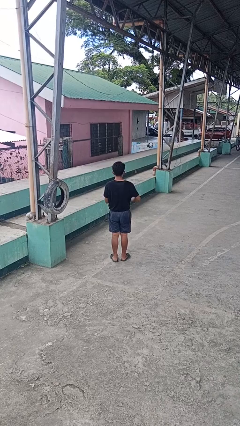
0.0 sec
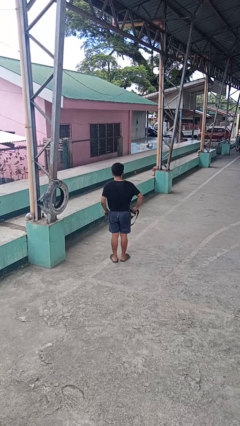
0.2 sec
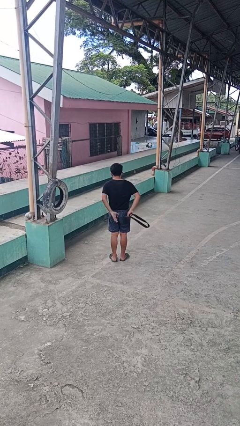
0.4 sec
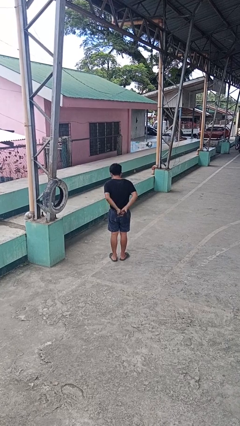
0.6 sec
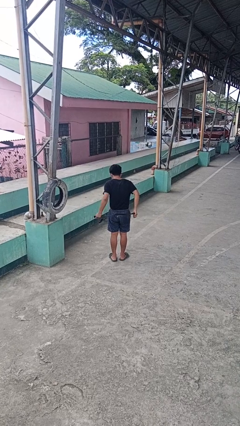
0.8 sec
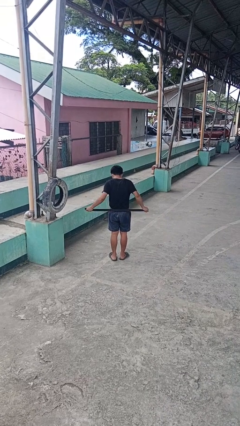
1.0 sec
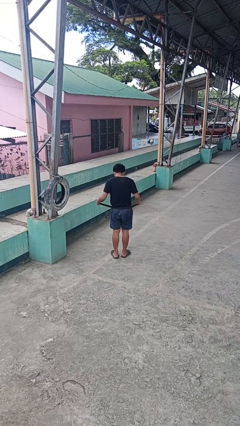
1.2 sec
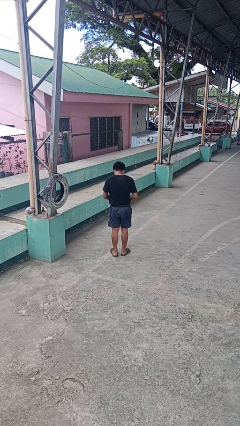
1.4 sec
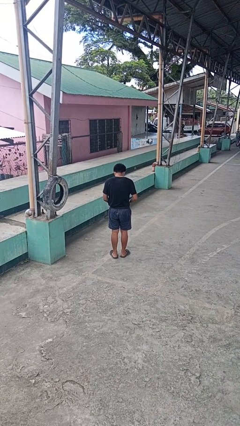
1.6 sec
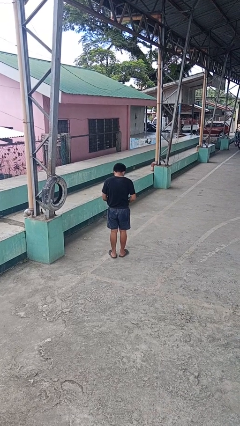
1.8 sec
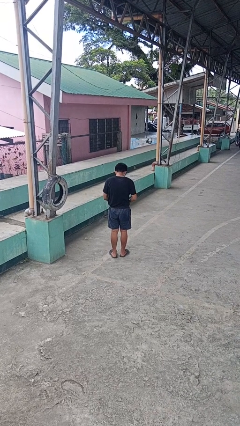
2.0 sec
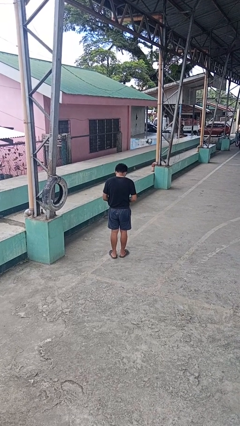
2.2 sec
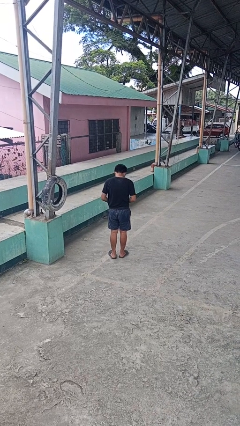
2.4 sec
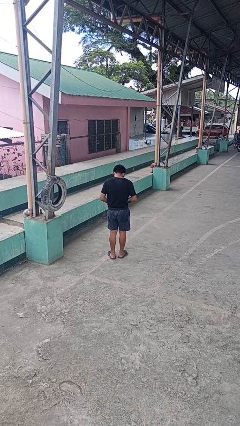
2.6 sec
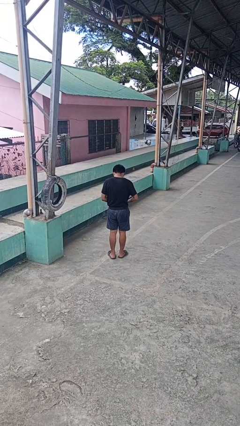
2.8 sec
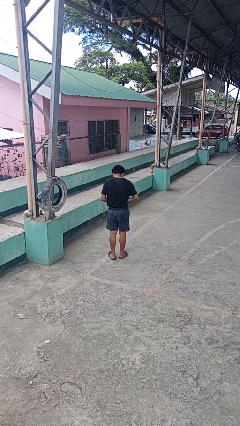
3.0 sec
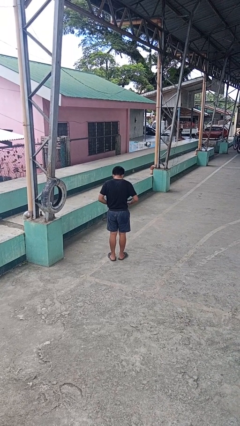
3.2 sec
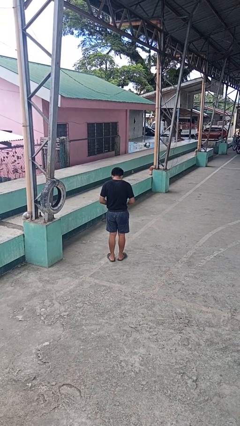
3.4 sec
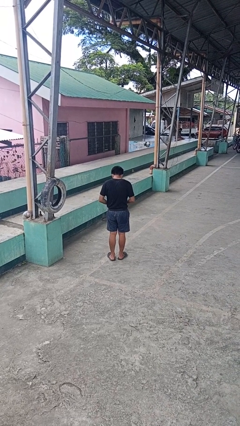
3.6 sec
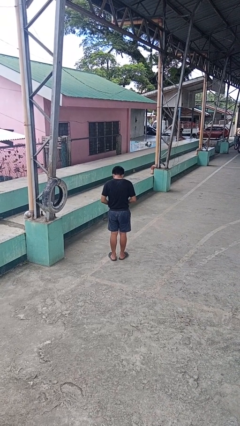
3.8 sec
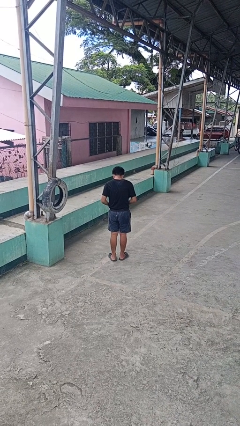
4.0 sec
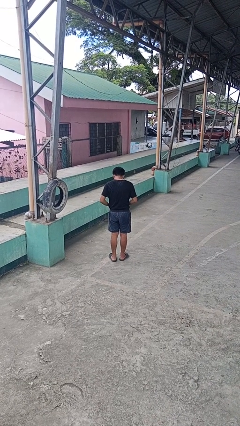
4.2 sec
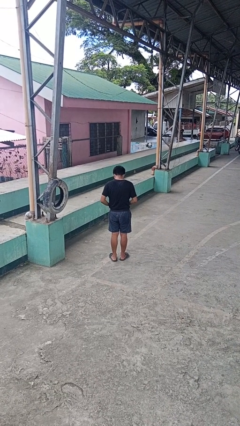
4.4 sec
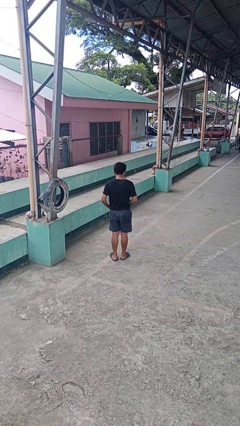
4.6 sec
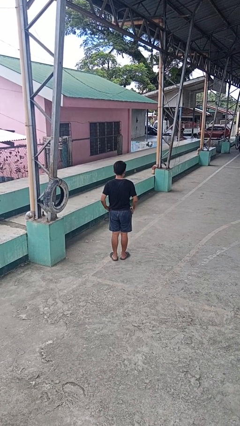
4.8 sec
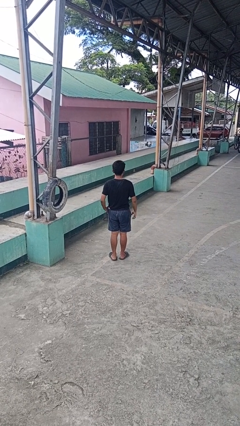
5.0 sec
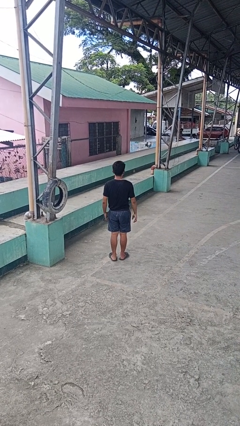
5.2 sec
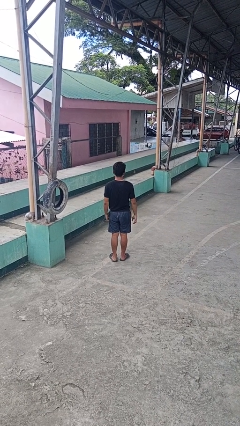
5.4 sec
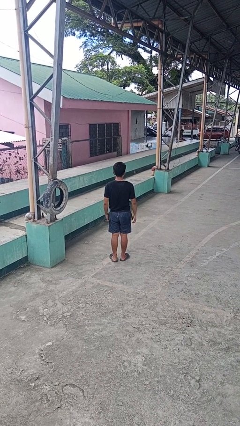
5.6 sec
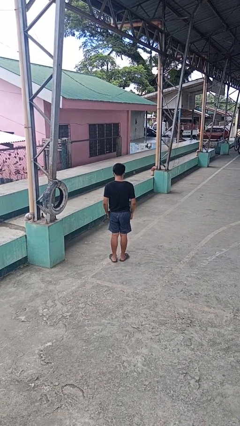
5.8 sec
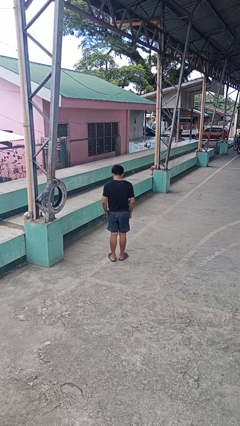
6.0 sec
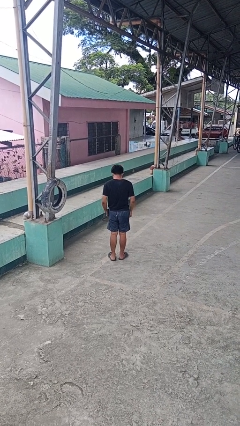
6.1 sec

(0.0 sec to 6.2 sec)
person puts on belt

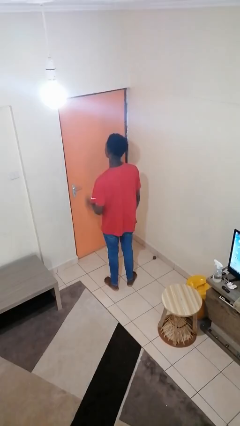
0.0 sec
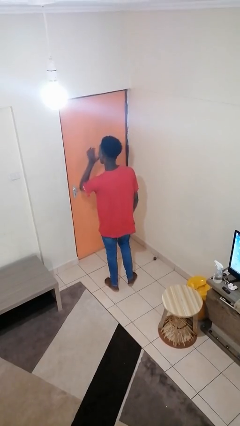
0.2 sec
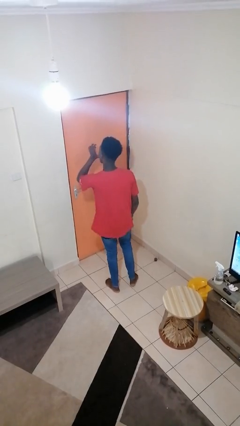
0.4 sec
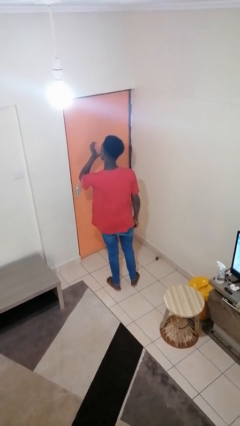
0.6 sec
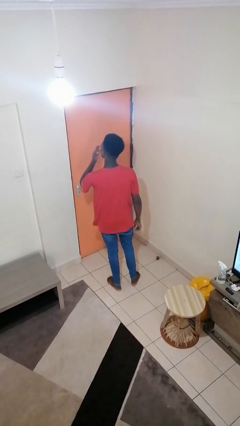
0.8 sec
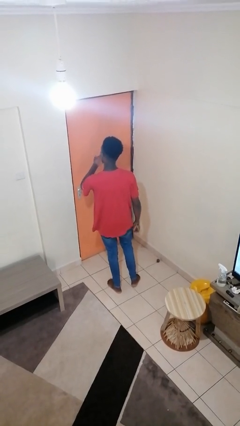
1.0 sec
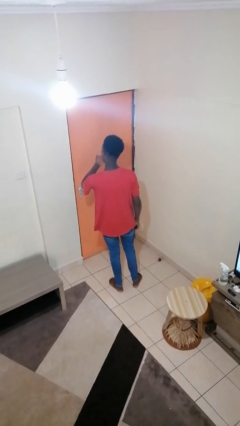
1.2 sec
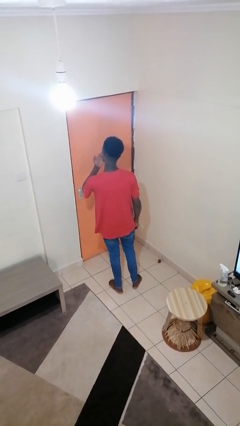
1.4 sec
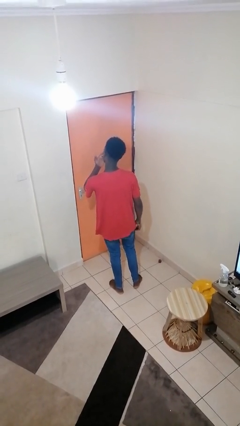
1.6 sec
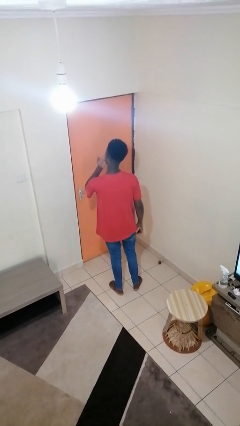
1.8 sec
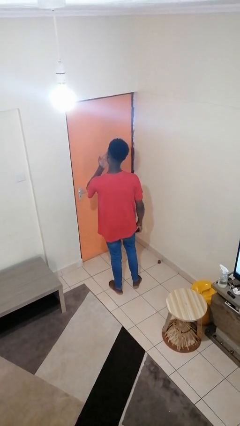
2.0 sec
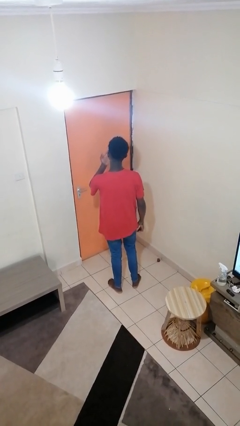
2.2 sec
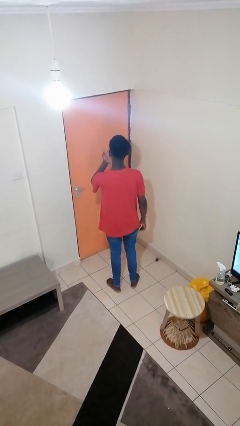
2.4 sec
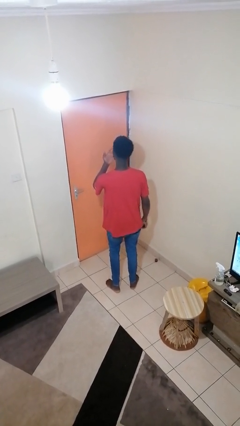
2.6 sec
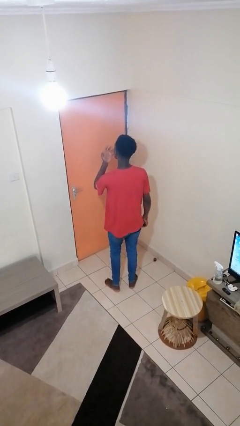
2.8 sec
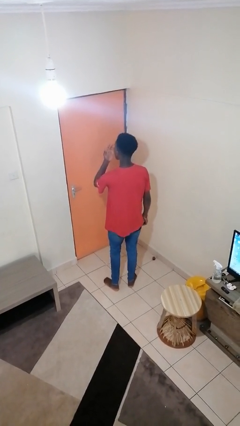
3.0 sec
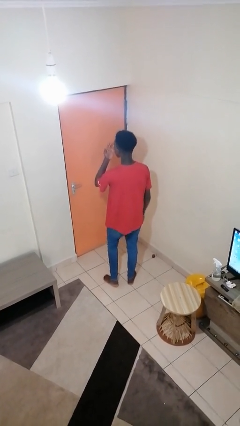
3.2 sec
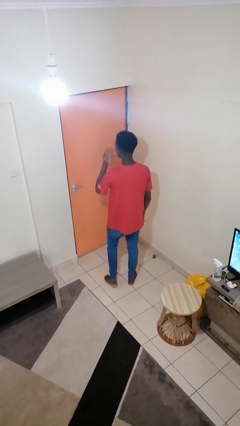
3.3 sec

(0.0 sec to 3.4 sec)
person licks fingers

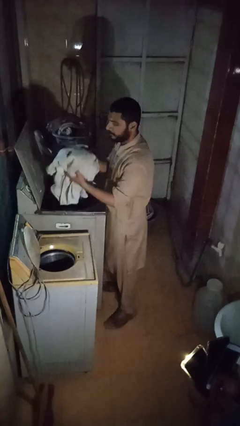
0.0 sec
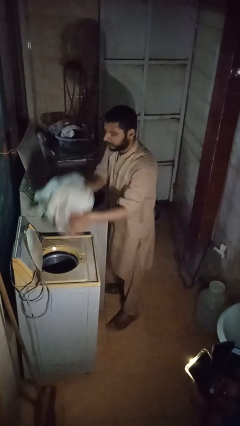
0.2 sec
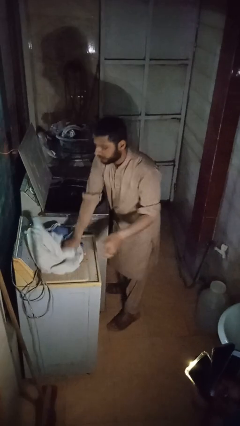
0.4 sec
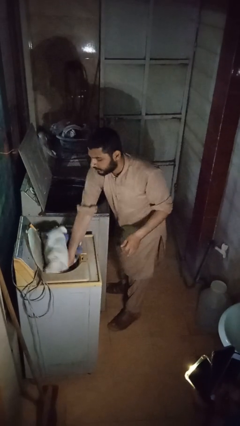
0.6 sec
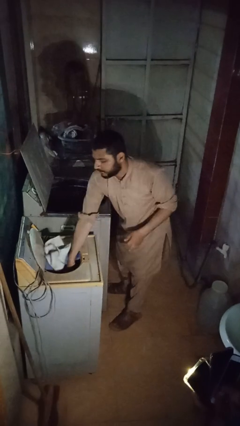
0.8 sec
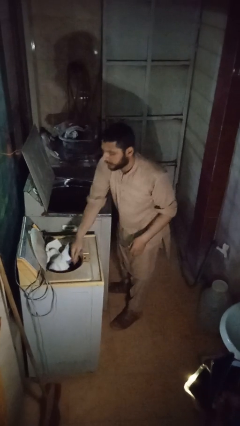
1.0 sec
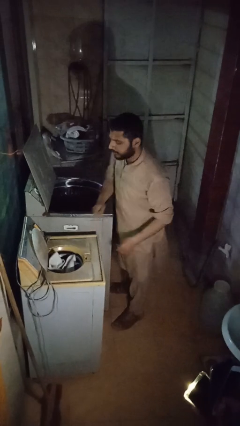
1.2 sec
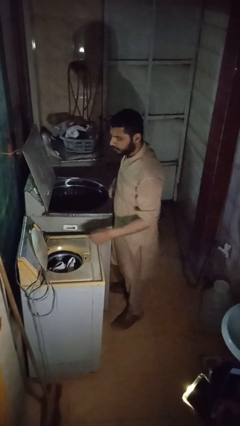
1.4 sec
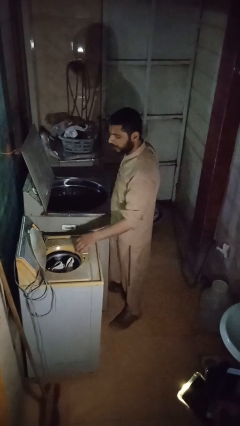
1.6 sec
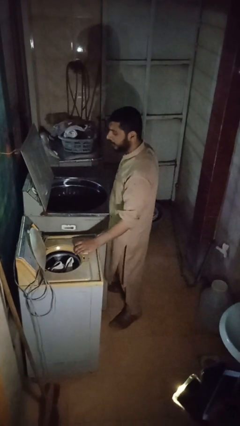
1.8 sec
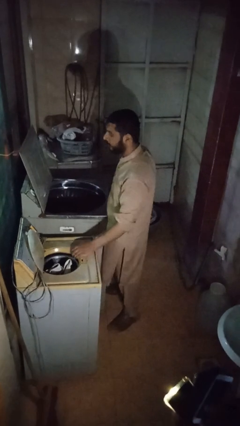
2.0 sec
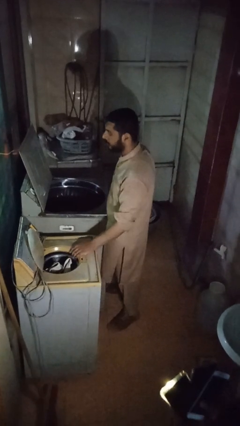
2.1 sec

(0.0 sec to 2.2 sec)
person loads dryer

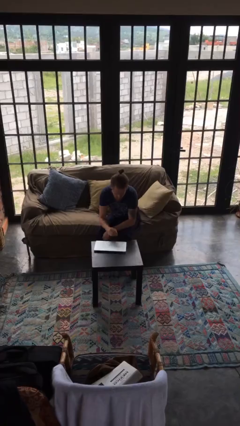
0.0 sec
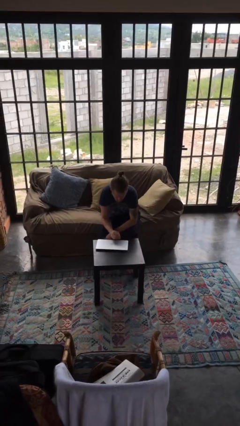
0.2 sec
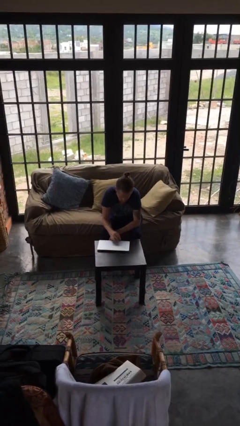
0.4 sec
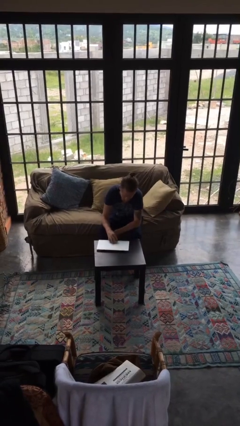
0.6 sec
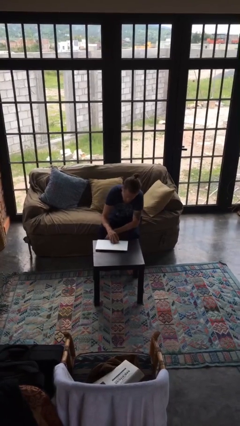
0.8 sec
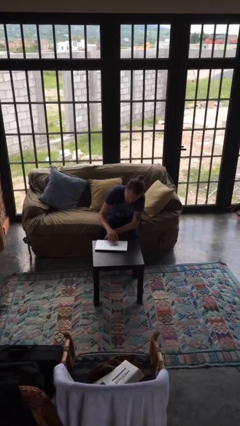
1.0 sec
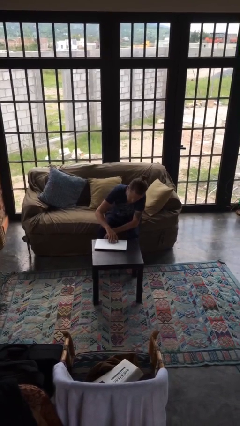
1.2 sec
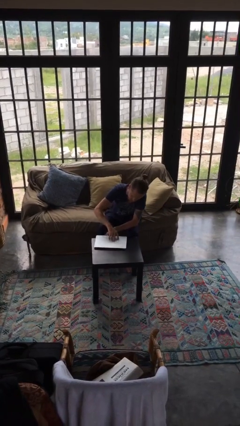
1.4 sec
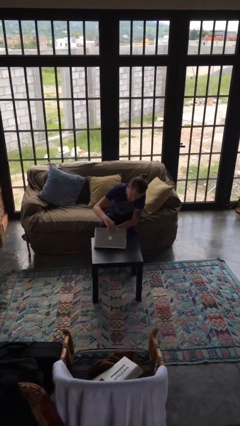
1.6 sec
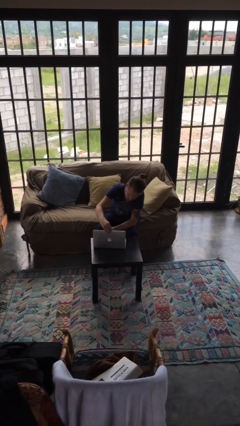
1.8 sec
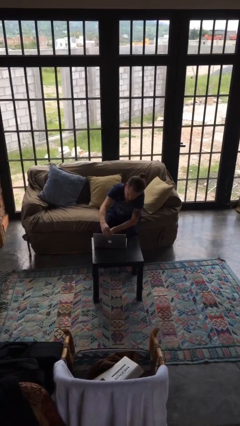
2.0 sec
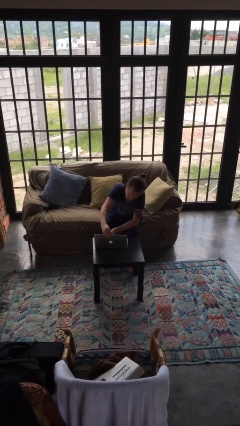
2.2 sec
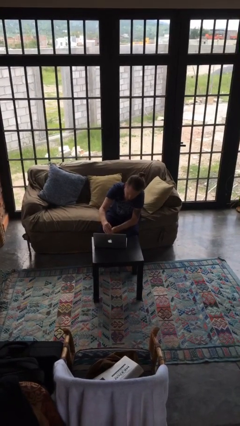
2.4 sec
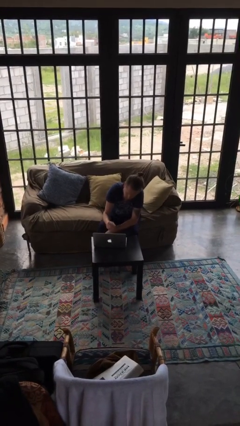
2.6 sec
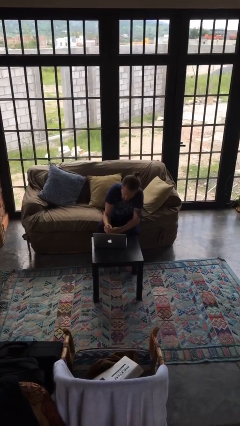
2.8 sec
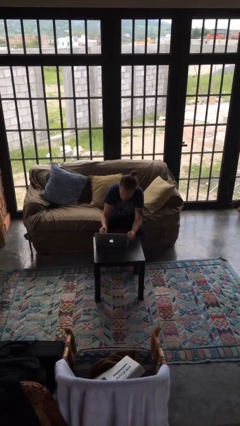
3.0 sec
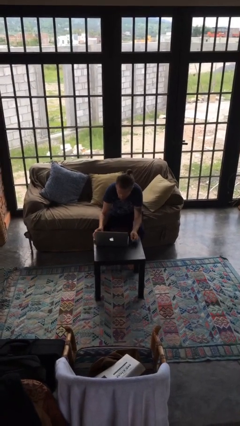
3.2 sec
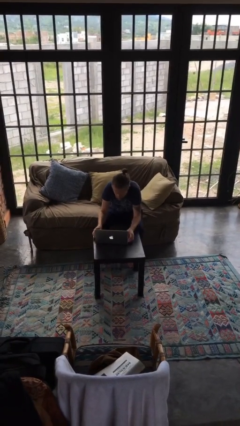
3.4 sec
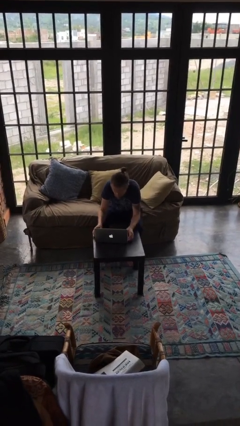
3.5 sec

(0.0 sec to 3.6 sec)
person opens laptop

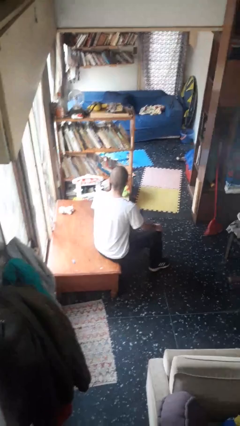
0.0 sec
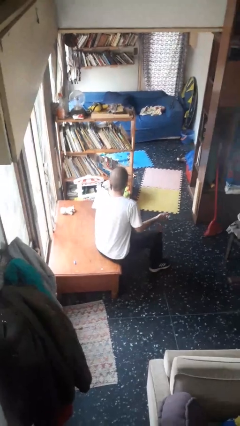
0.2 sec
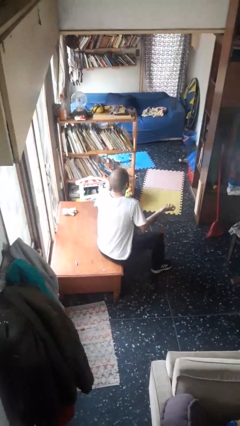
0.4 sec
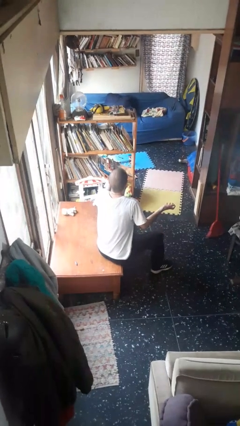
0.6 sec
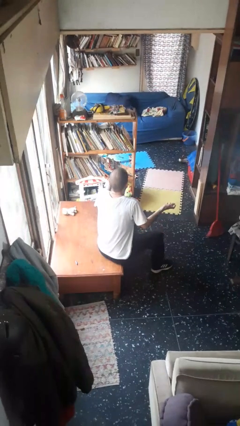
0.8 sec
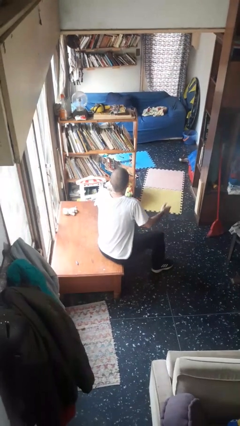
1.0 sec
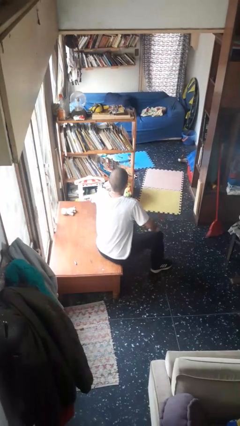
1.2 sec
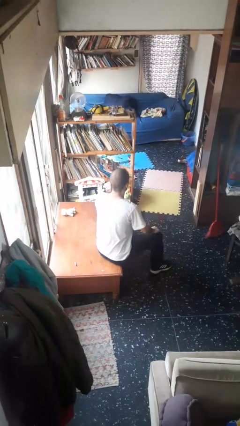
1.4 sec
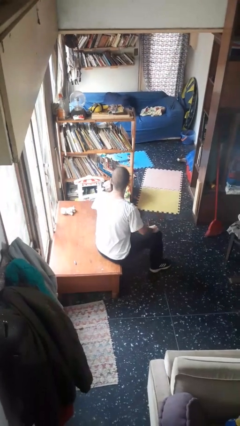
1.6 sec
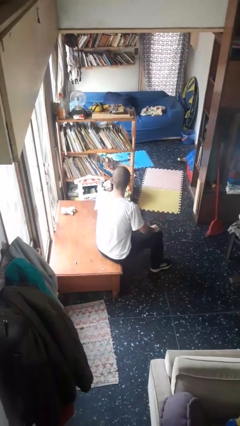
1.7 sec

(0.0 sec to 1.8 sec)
person shrugs

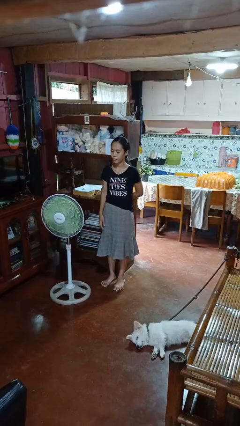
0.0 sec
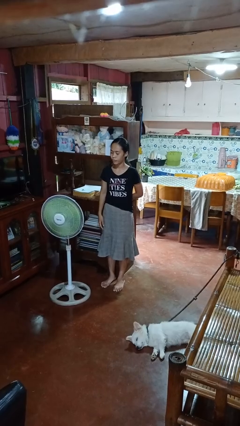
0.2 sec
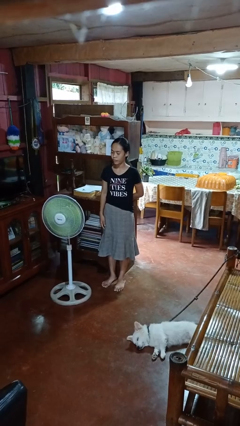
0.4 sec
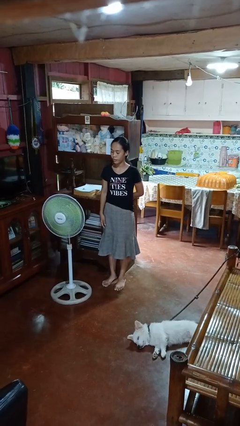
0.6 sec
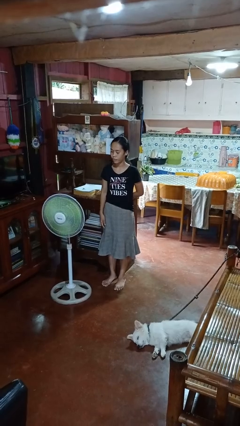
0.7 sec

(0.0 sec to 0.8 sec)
person turns off fan
